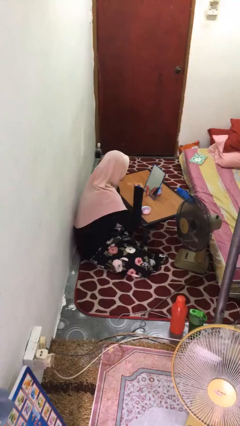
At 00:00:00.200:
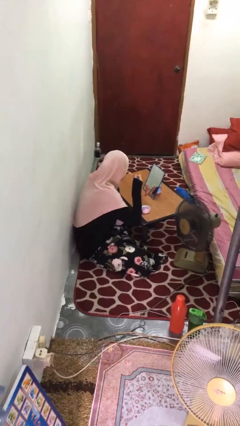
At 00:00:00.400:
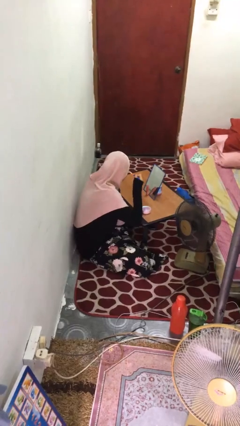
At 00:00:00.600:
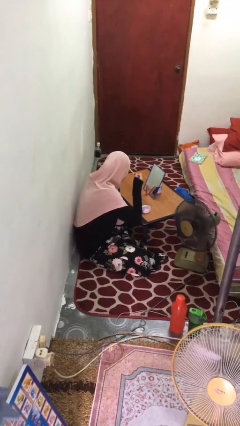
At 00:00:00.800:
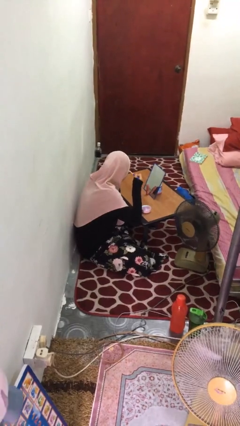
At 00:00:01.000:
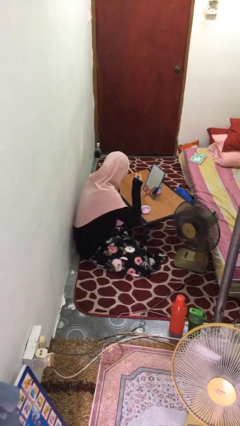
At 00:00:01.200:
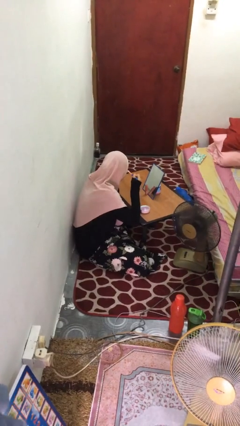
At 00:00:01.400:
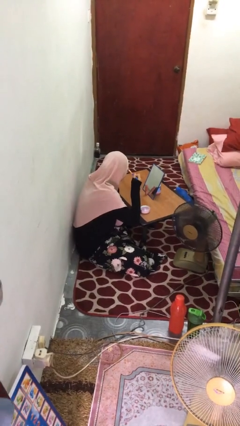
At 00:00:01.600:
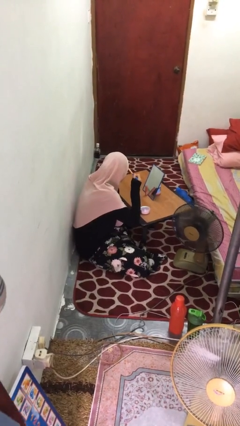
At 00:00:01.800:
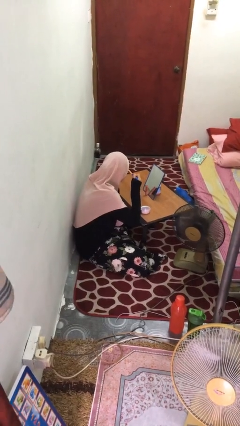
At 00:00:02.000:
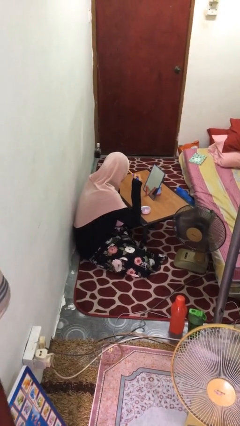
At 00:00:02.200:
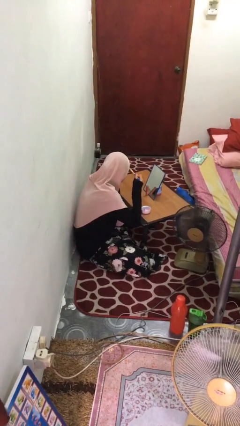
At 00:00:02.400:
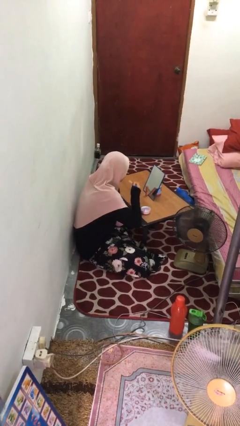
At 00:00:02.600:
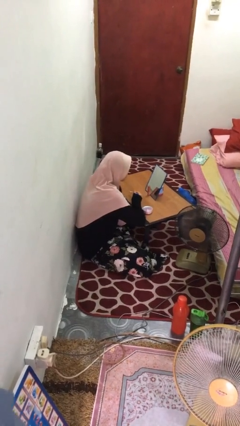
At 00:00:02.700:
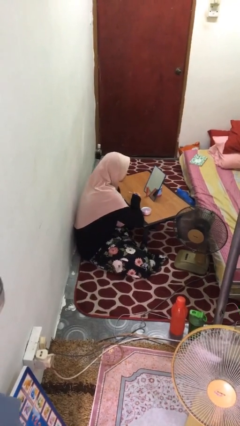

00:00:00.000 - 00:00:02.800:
person applies eye makeup

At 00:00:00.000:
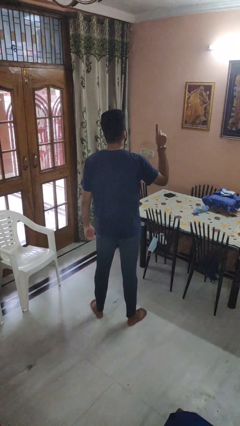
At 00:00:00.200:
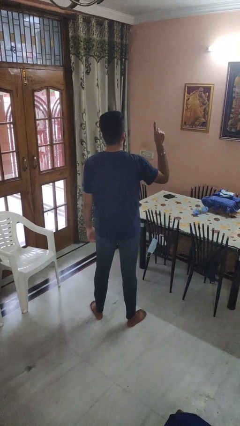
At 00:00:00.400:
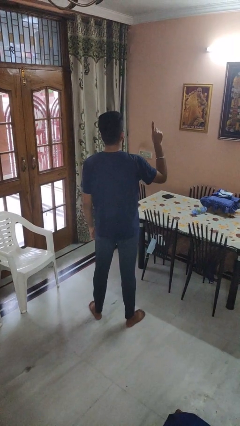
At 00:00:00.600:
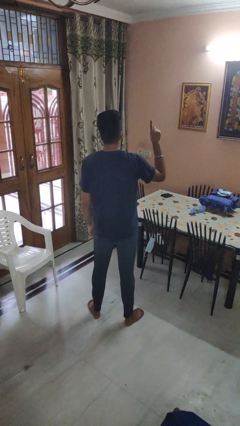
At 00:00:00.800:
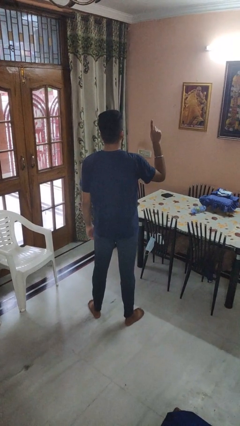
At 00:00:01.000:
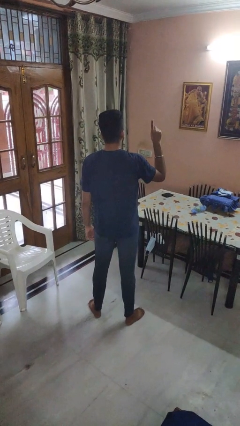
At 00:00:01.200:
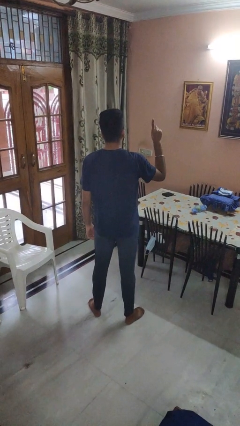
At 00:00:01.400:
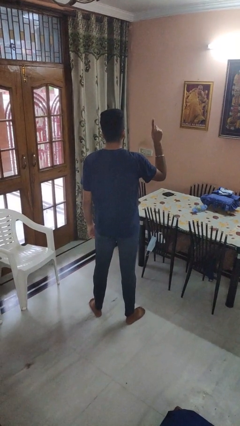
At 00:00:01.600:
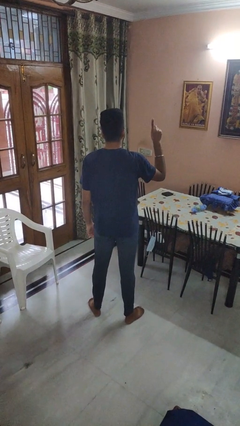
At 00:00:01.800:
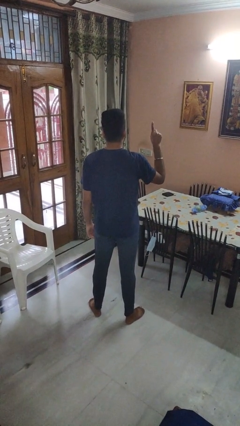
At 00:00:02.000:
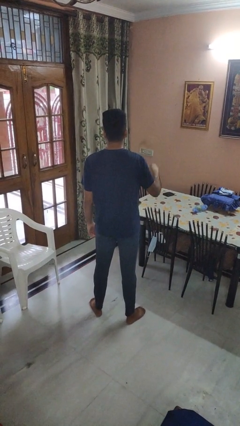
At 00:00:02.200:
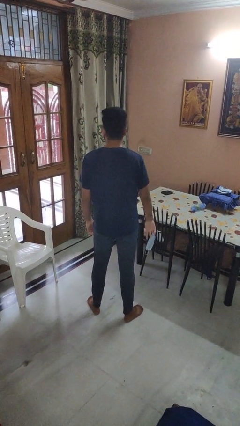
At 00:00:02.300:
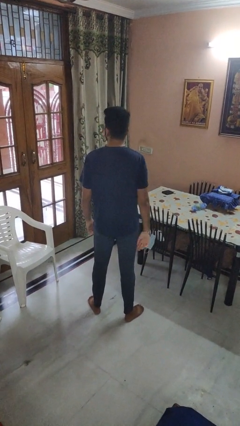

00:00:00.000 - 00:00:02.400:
person gestures number one

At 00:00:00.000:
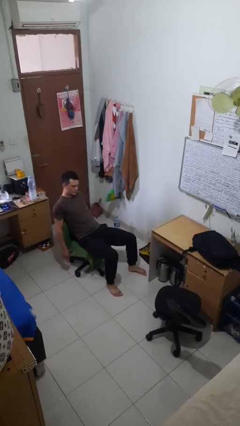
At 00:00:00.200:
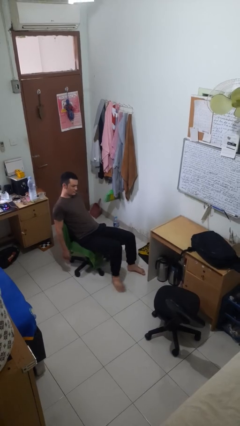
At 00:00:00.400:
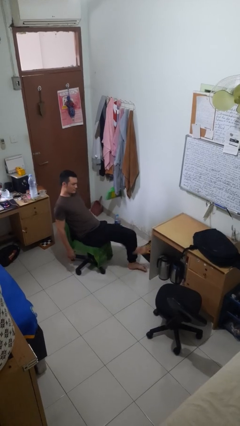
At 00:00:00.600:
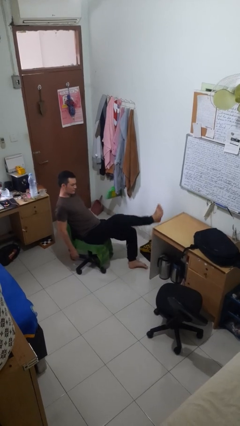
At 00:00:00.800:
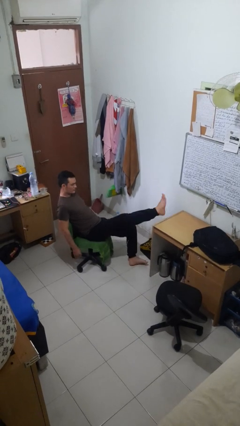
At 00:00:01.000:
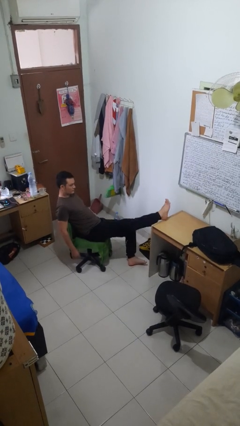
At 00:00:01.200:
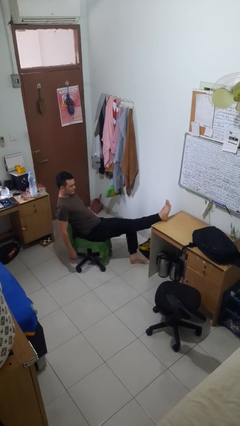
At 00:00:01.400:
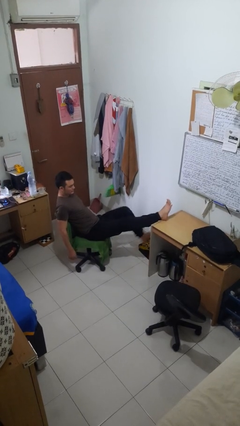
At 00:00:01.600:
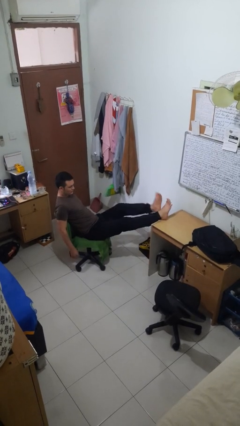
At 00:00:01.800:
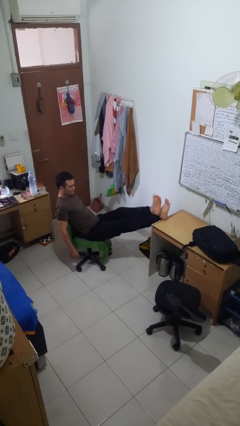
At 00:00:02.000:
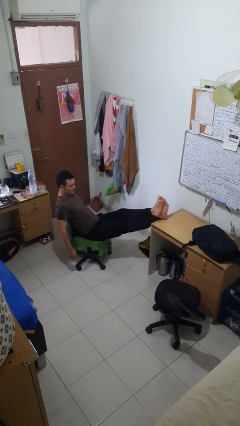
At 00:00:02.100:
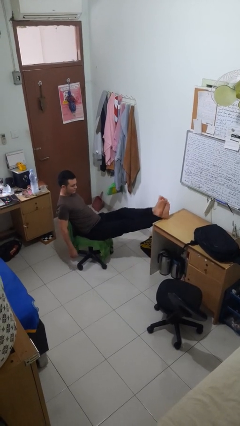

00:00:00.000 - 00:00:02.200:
person puts feet up

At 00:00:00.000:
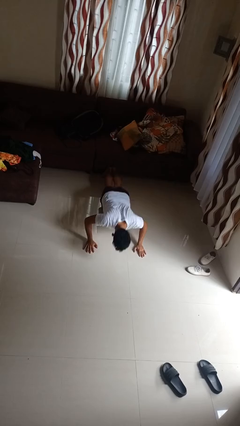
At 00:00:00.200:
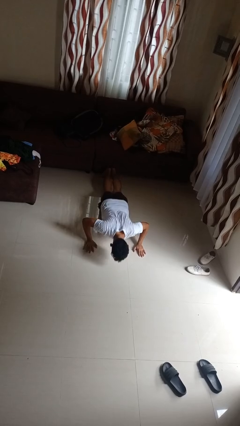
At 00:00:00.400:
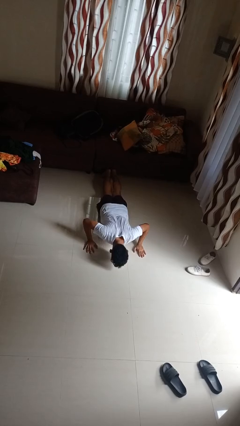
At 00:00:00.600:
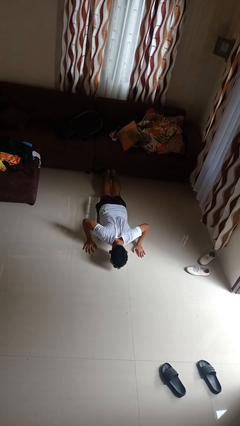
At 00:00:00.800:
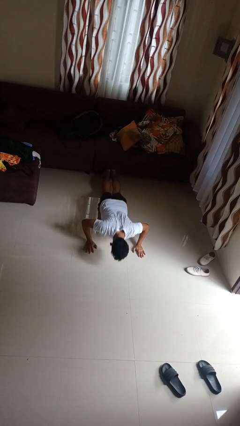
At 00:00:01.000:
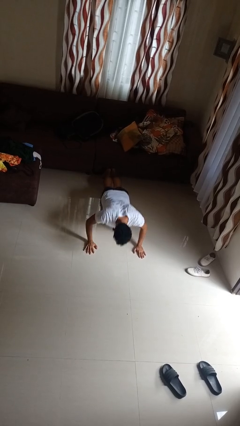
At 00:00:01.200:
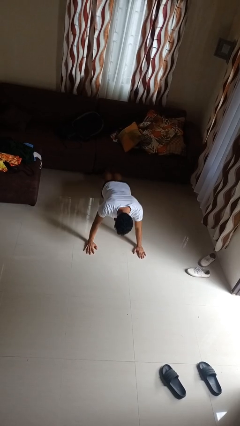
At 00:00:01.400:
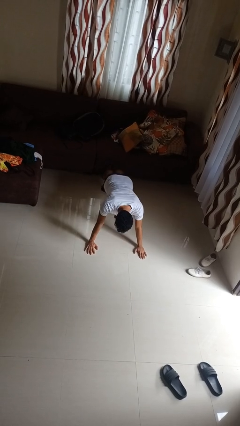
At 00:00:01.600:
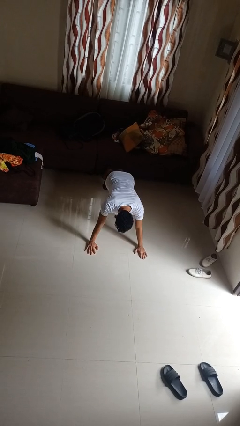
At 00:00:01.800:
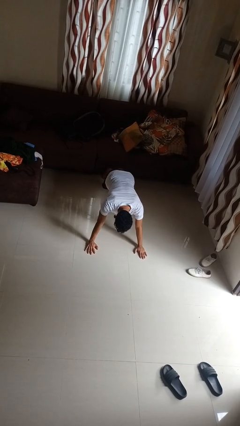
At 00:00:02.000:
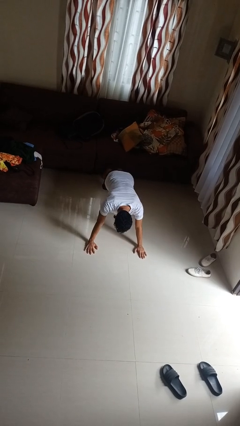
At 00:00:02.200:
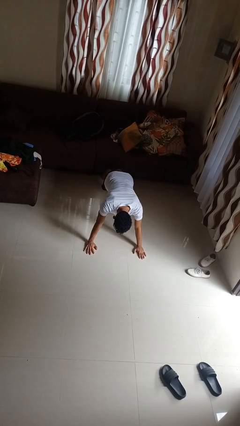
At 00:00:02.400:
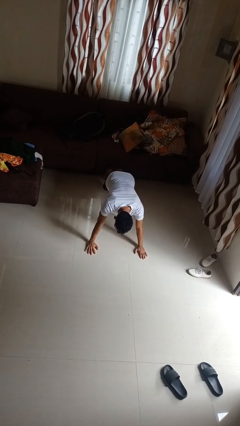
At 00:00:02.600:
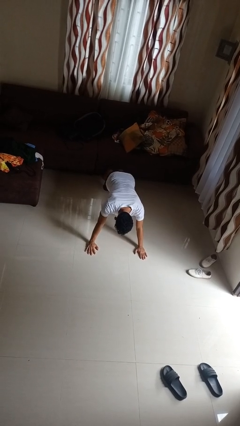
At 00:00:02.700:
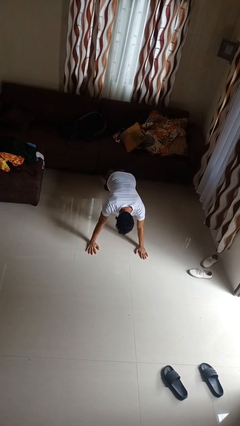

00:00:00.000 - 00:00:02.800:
person exercises with pushup

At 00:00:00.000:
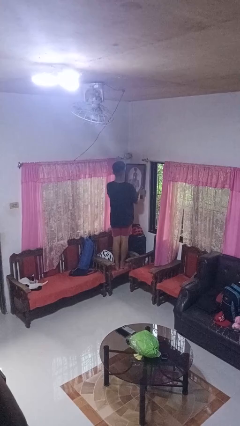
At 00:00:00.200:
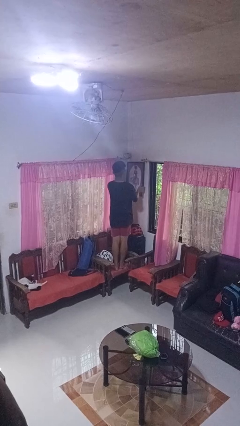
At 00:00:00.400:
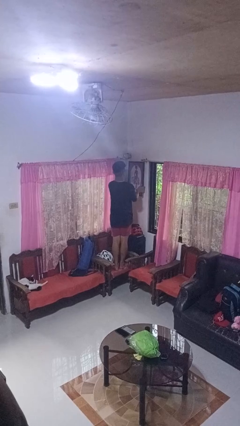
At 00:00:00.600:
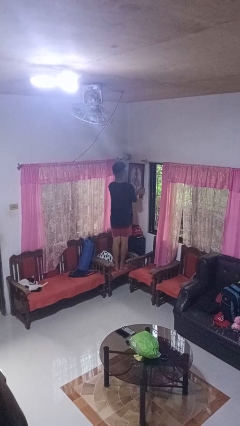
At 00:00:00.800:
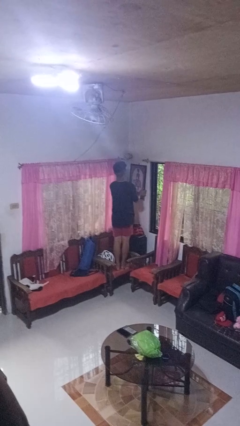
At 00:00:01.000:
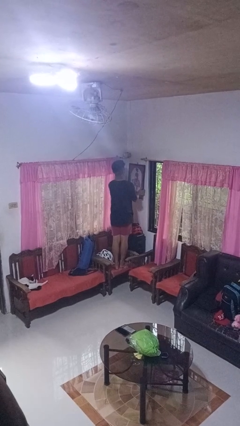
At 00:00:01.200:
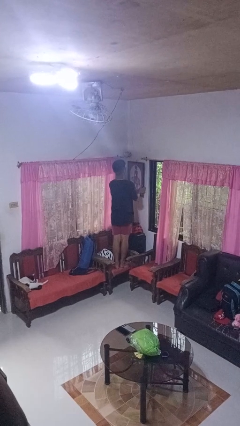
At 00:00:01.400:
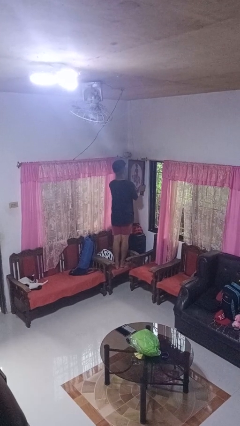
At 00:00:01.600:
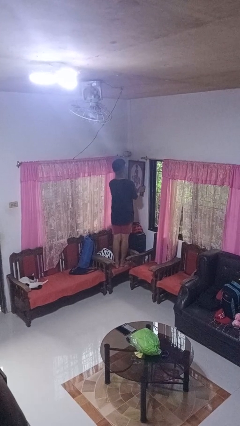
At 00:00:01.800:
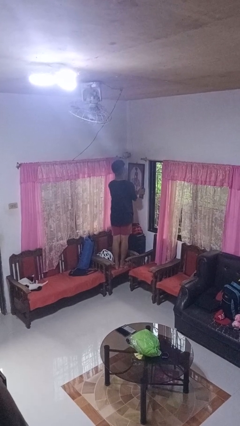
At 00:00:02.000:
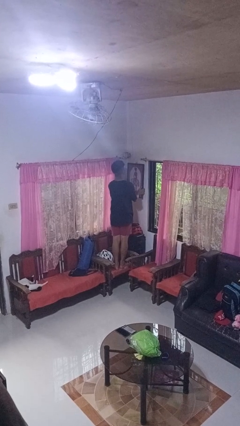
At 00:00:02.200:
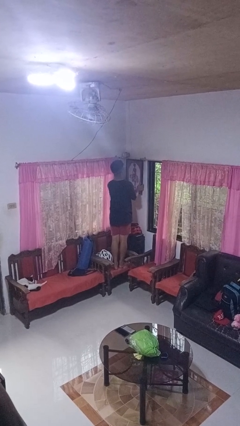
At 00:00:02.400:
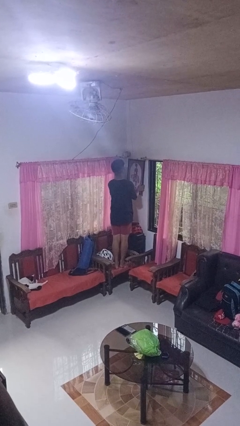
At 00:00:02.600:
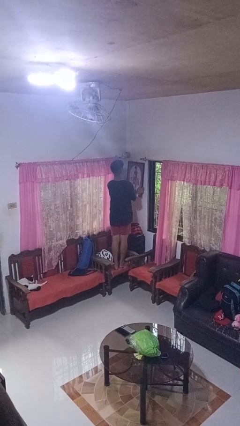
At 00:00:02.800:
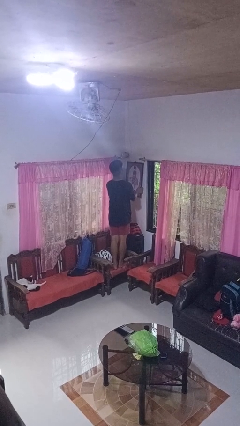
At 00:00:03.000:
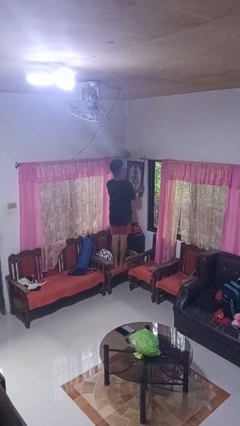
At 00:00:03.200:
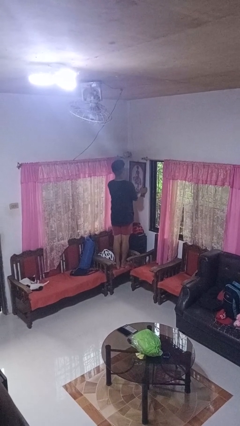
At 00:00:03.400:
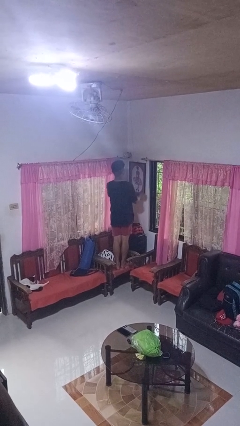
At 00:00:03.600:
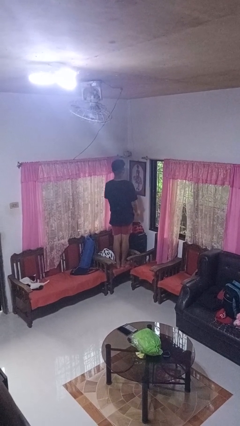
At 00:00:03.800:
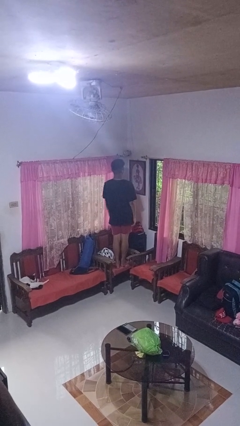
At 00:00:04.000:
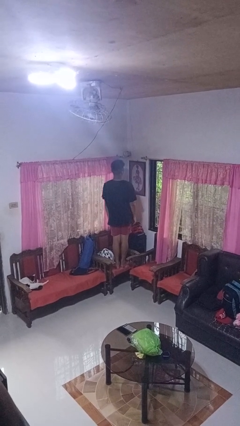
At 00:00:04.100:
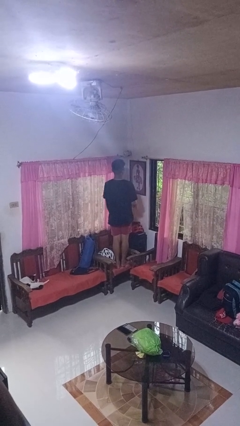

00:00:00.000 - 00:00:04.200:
person puts up picture frame

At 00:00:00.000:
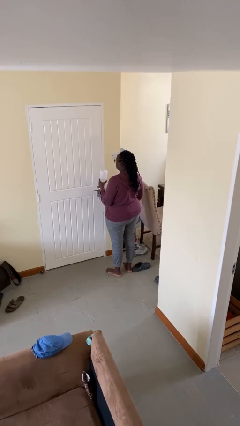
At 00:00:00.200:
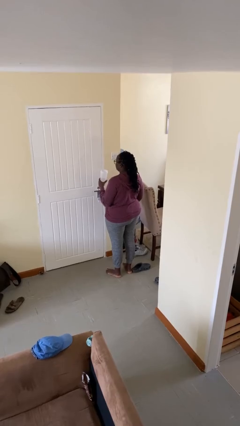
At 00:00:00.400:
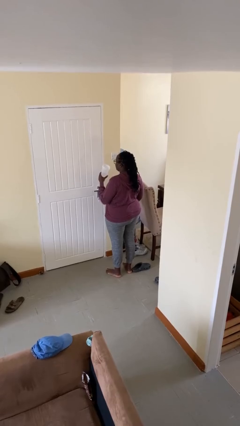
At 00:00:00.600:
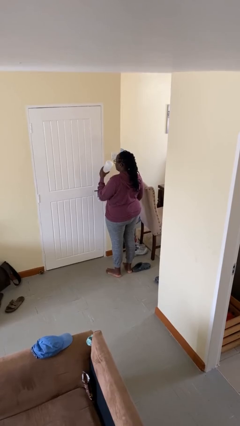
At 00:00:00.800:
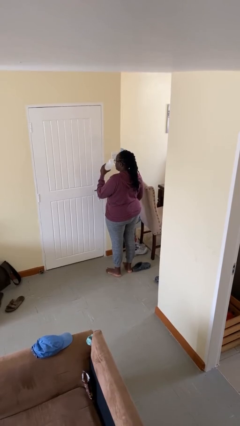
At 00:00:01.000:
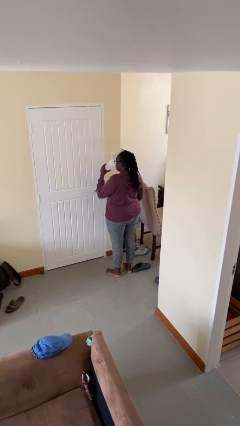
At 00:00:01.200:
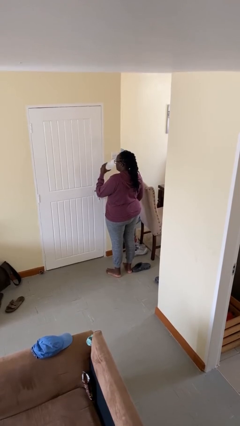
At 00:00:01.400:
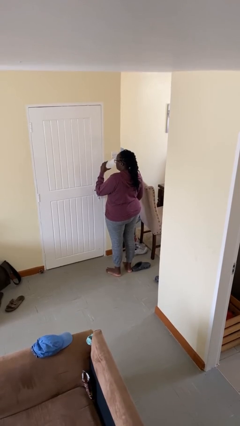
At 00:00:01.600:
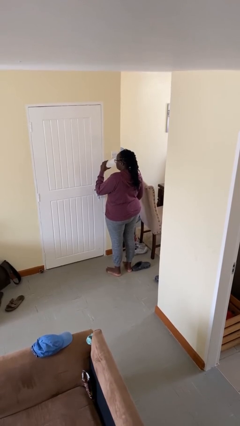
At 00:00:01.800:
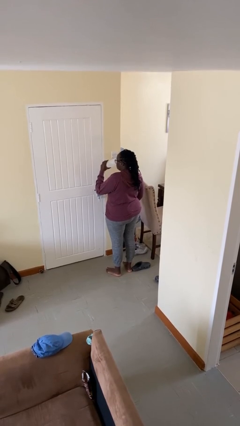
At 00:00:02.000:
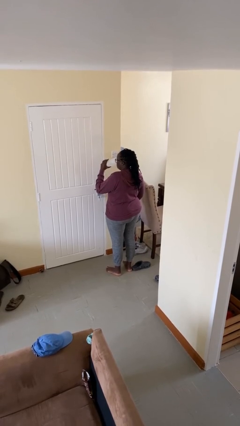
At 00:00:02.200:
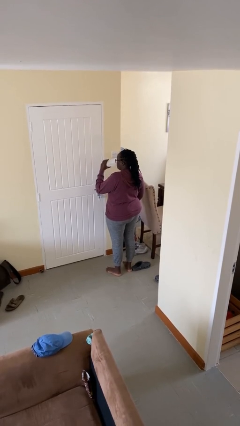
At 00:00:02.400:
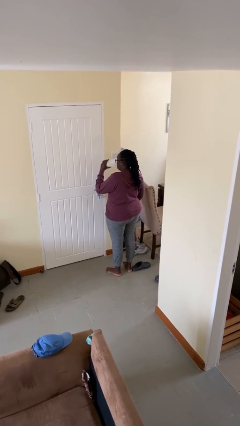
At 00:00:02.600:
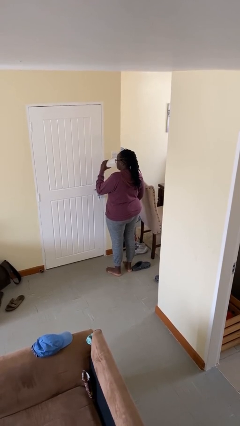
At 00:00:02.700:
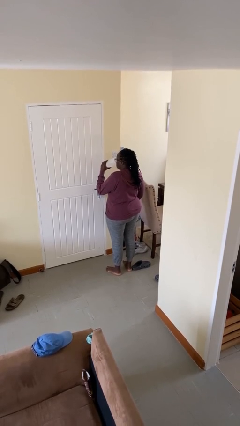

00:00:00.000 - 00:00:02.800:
person drinks from bottle
